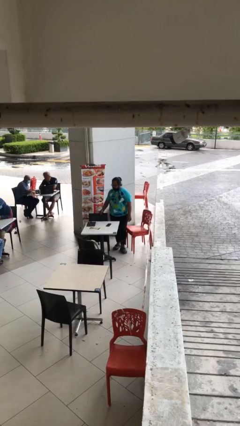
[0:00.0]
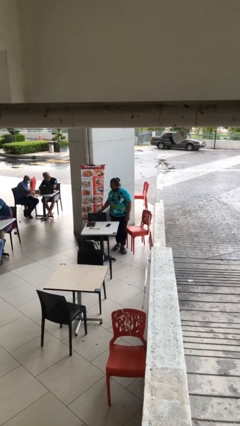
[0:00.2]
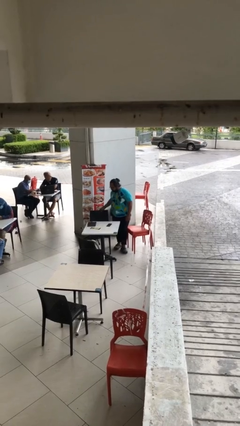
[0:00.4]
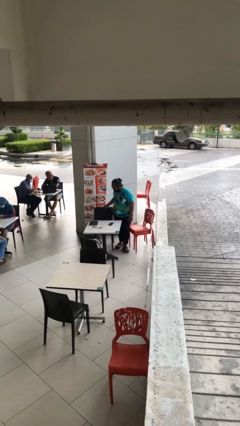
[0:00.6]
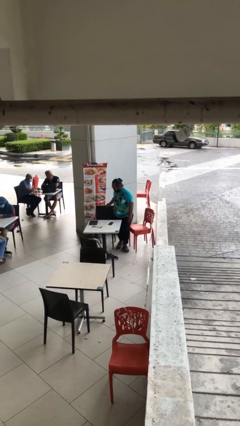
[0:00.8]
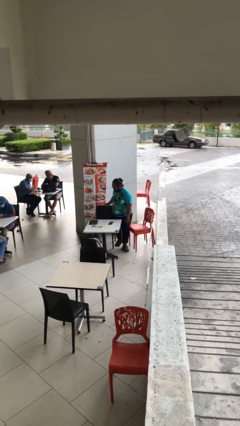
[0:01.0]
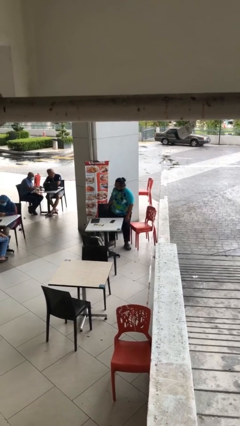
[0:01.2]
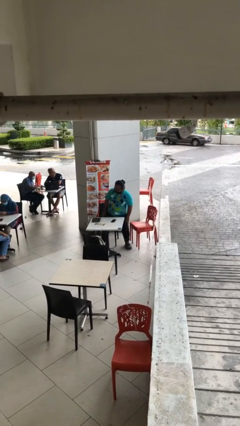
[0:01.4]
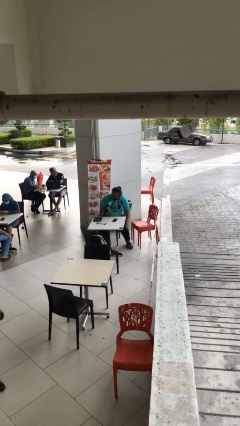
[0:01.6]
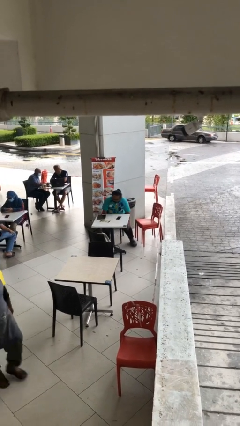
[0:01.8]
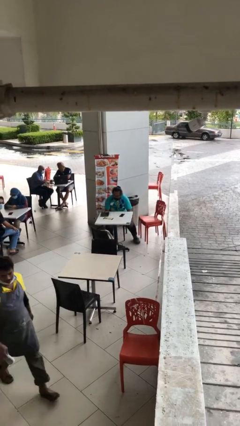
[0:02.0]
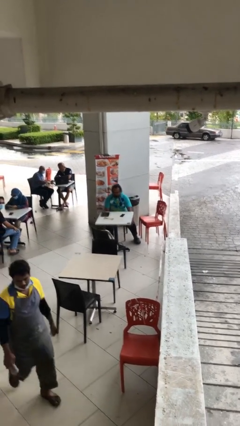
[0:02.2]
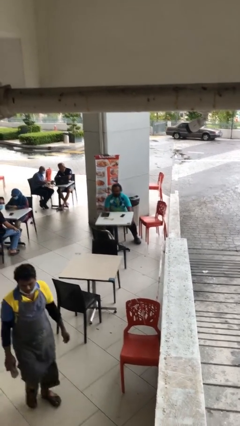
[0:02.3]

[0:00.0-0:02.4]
person sits down

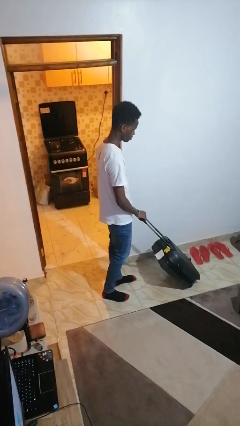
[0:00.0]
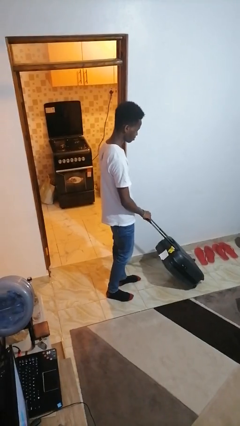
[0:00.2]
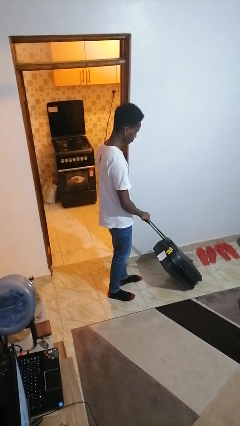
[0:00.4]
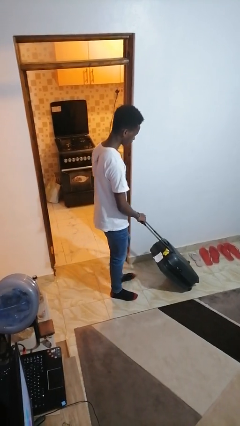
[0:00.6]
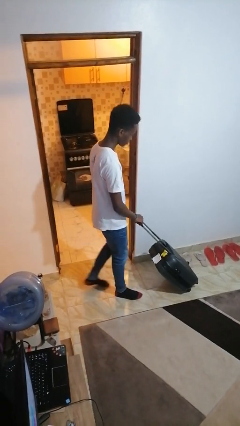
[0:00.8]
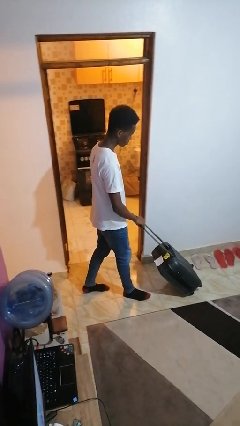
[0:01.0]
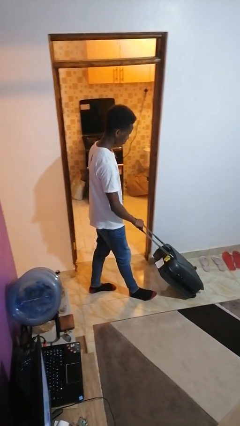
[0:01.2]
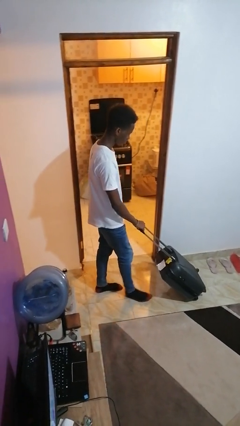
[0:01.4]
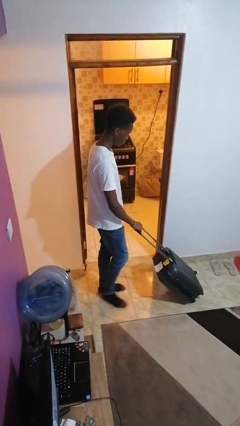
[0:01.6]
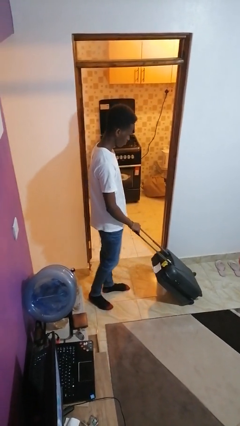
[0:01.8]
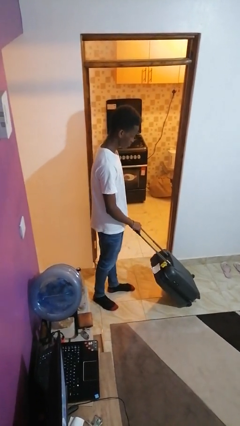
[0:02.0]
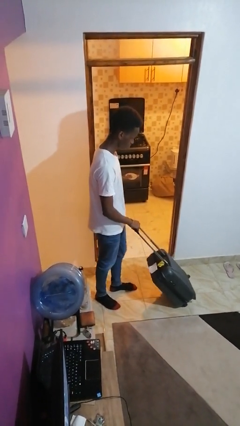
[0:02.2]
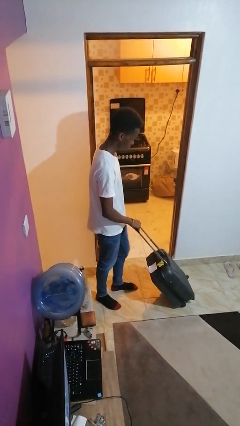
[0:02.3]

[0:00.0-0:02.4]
person pulls wheeled cart

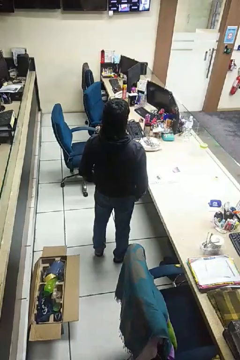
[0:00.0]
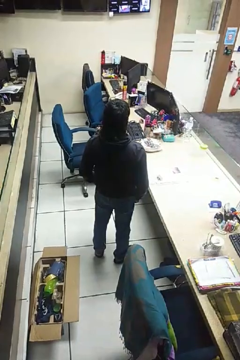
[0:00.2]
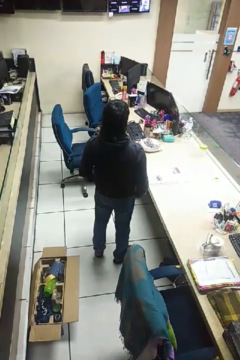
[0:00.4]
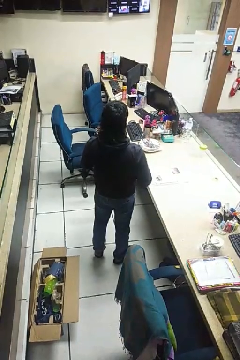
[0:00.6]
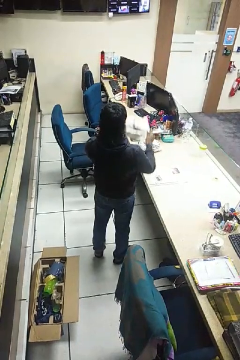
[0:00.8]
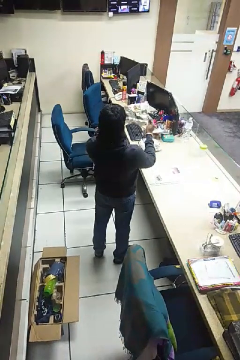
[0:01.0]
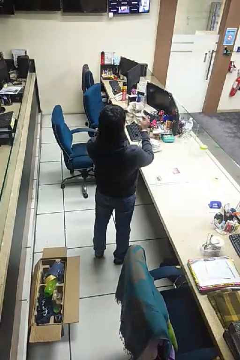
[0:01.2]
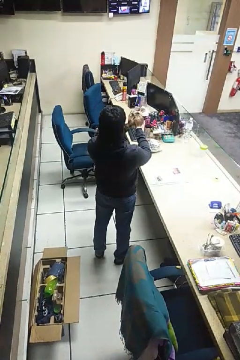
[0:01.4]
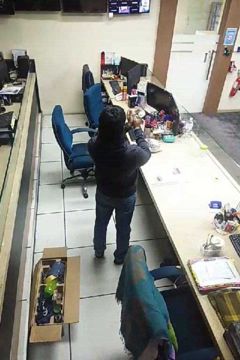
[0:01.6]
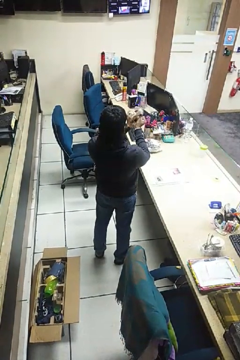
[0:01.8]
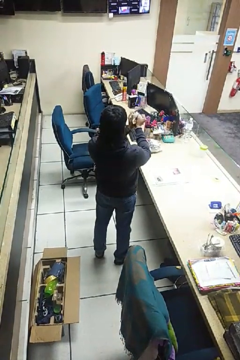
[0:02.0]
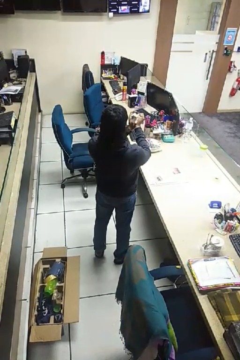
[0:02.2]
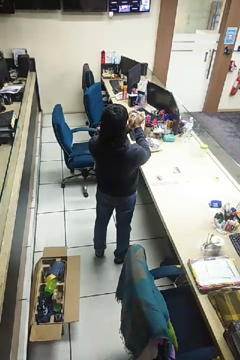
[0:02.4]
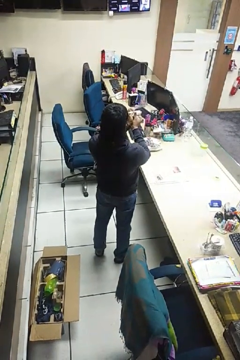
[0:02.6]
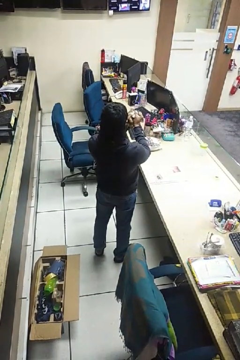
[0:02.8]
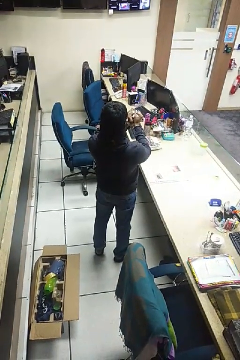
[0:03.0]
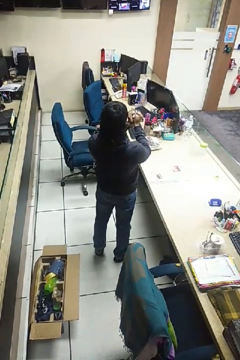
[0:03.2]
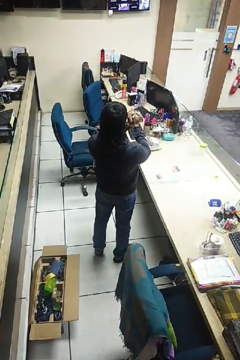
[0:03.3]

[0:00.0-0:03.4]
person crumples paper

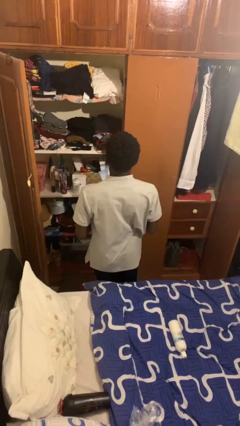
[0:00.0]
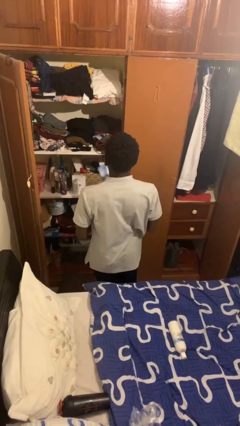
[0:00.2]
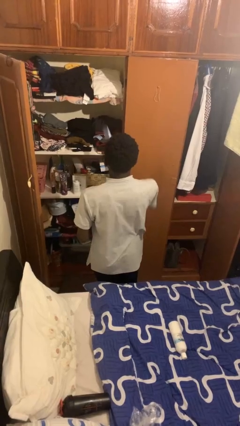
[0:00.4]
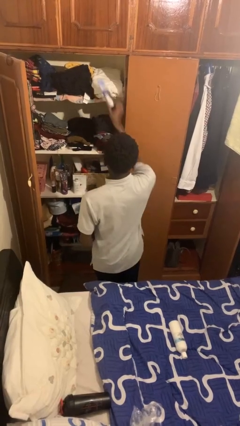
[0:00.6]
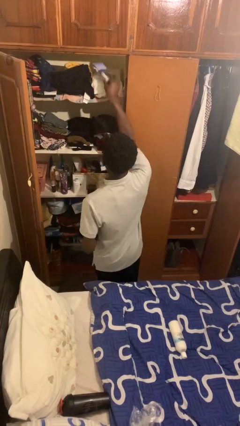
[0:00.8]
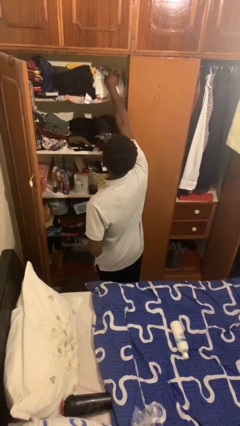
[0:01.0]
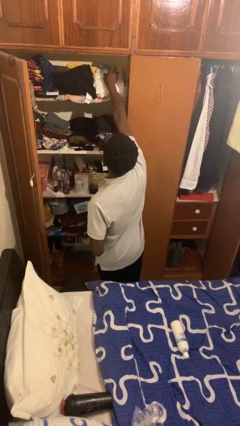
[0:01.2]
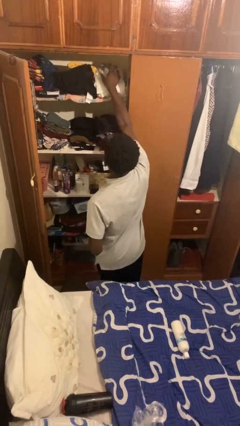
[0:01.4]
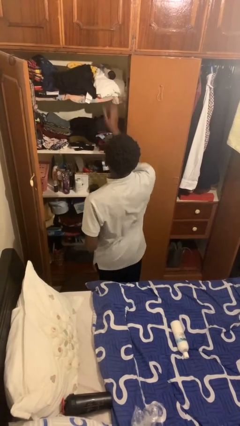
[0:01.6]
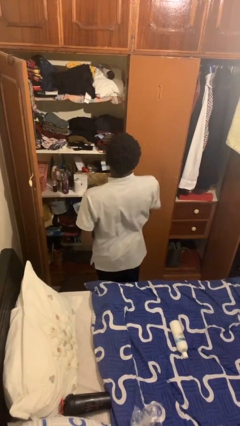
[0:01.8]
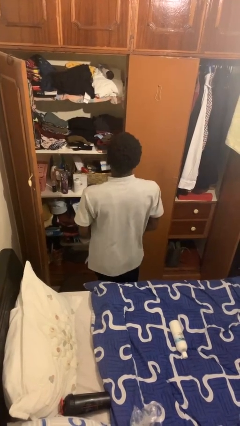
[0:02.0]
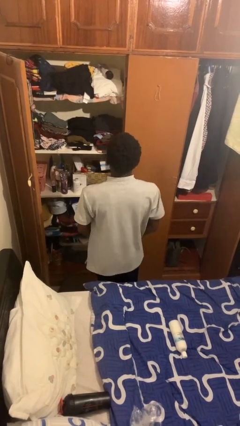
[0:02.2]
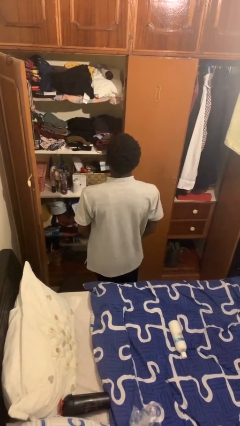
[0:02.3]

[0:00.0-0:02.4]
person puts down object on shelf

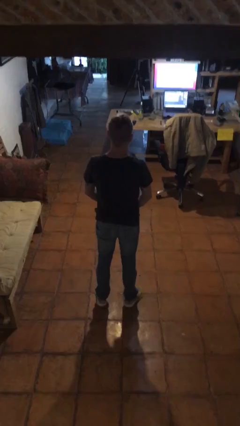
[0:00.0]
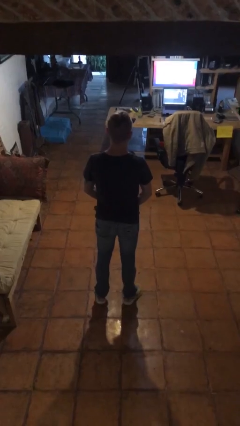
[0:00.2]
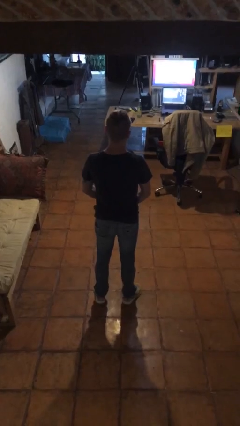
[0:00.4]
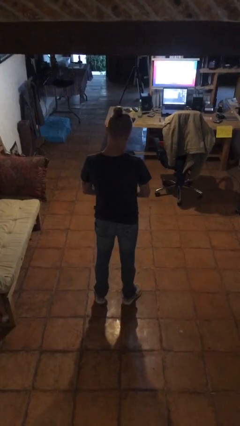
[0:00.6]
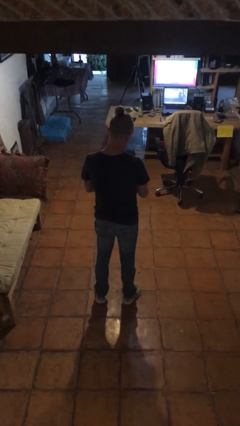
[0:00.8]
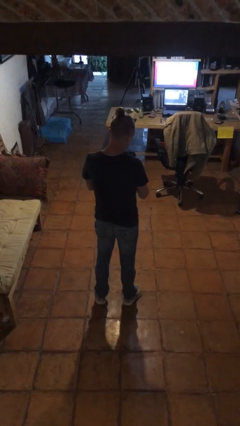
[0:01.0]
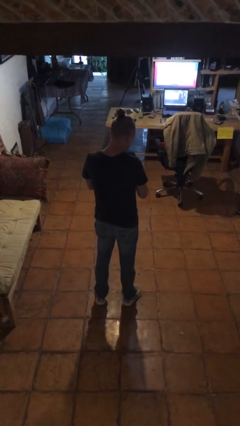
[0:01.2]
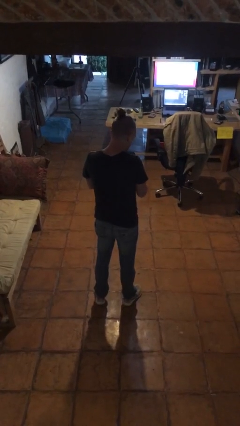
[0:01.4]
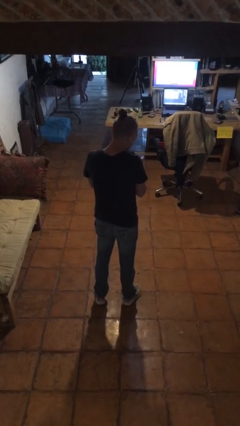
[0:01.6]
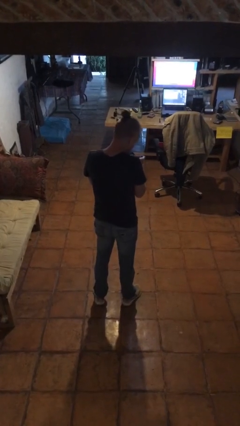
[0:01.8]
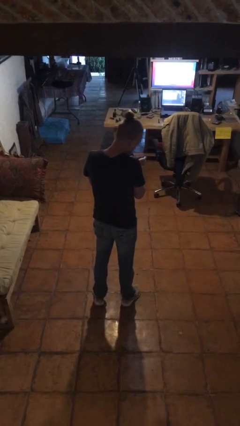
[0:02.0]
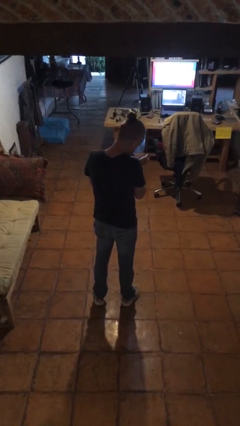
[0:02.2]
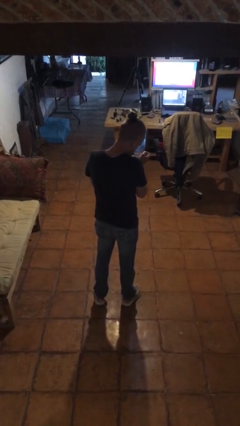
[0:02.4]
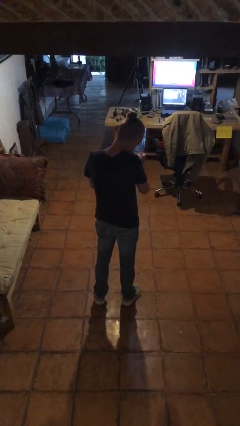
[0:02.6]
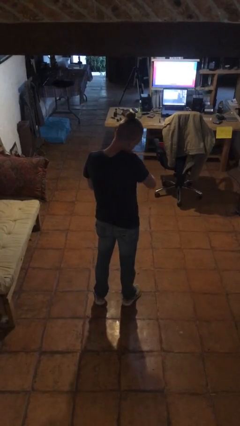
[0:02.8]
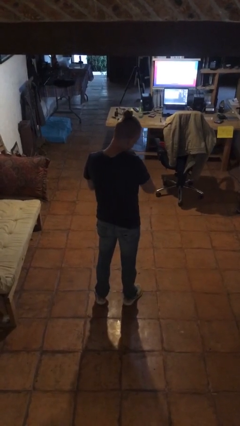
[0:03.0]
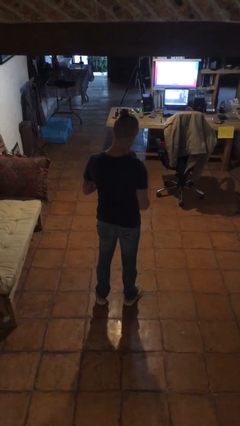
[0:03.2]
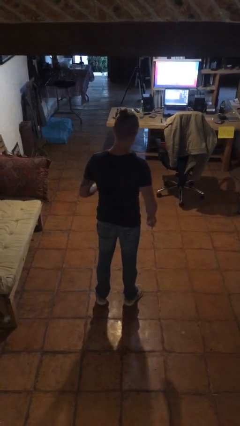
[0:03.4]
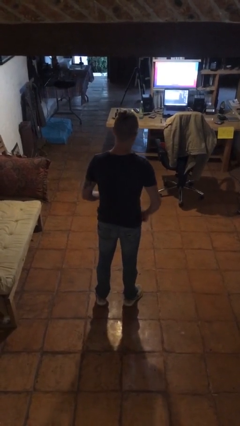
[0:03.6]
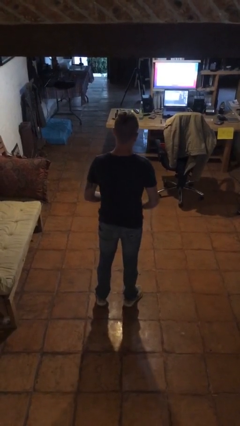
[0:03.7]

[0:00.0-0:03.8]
person takes off wristwatch

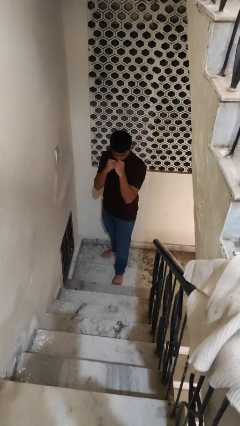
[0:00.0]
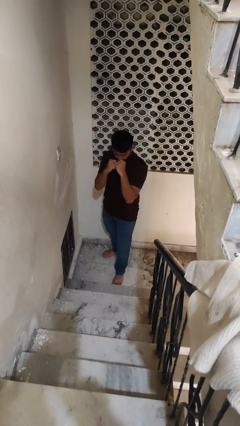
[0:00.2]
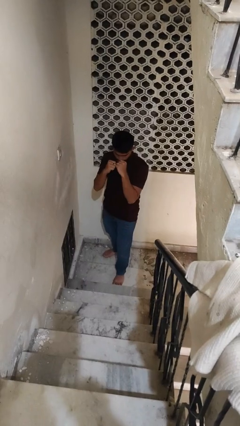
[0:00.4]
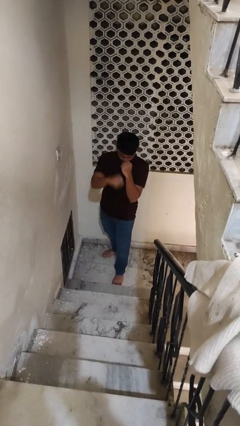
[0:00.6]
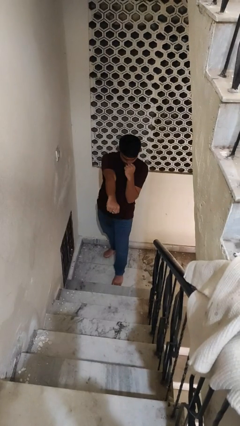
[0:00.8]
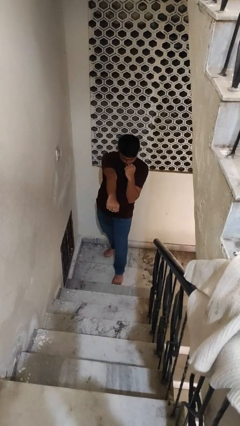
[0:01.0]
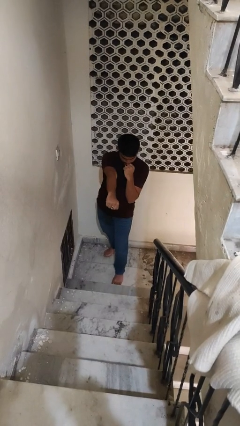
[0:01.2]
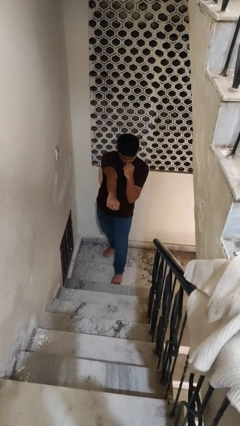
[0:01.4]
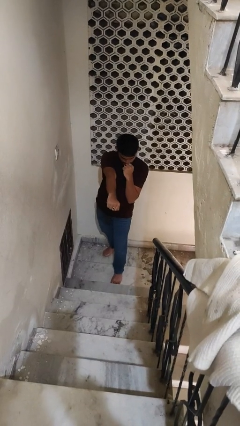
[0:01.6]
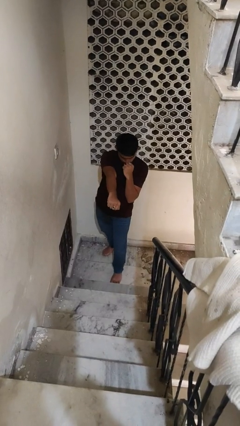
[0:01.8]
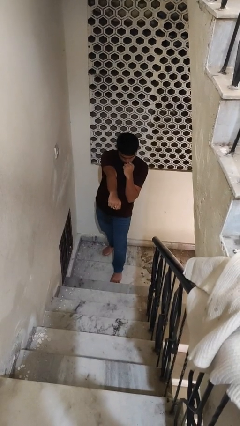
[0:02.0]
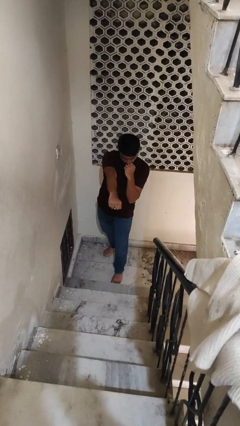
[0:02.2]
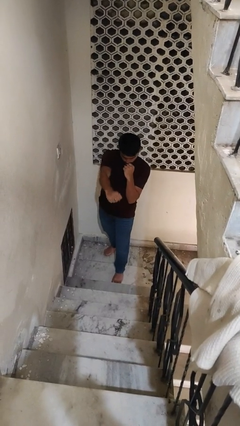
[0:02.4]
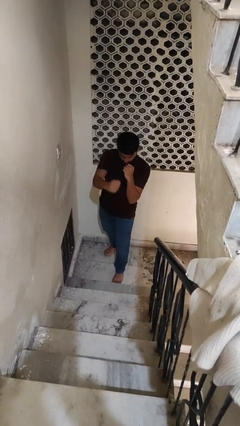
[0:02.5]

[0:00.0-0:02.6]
person punches

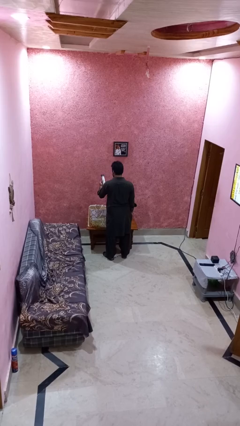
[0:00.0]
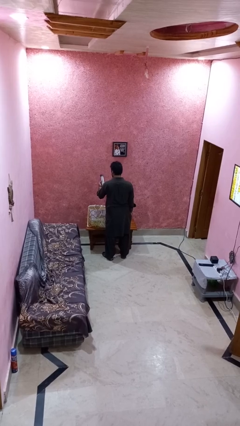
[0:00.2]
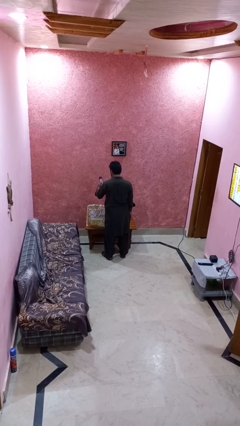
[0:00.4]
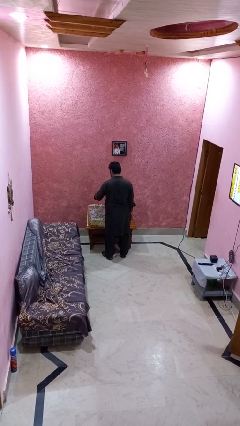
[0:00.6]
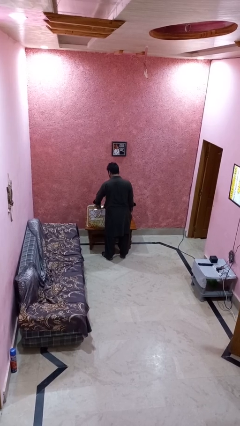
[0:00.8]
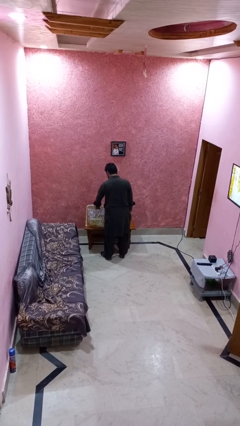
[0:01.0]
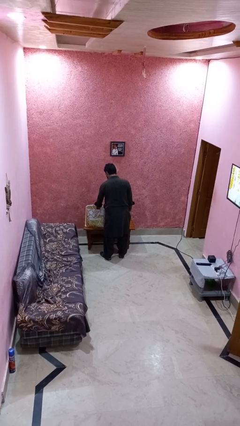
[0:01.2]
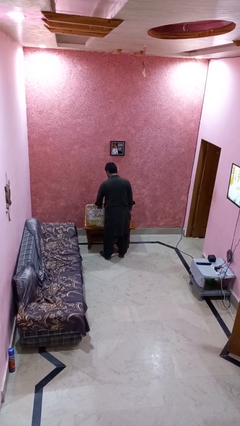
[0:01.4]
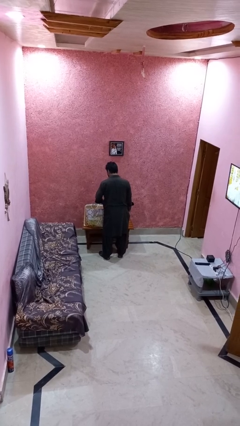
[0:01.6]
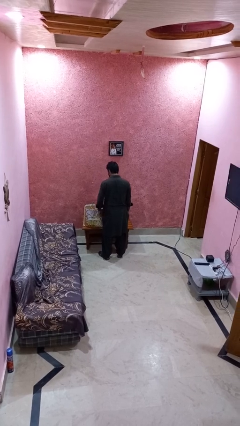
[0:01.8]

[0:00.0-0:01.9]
person puts object into bag
